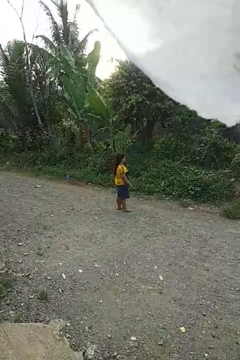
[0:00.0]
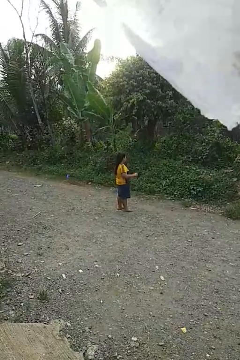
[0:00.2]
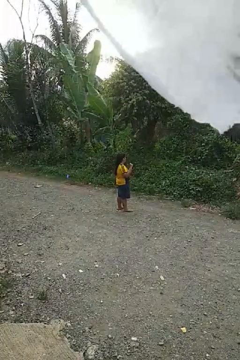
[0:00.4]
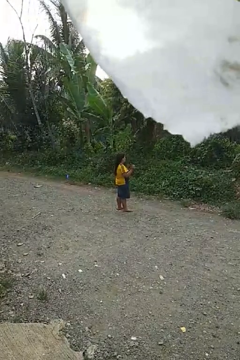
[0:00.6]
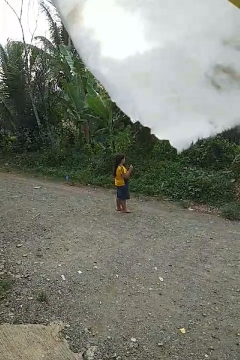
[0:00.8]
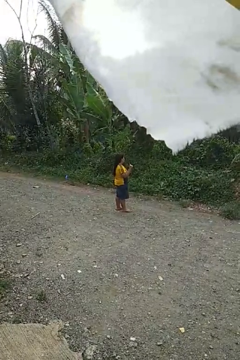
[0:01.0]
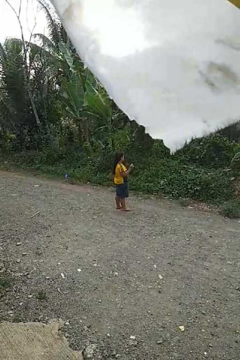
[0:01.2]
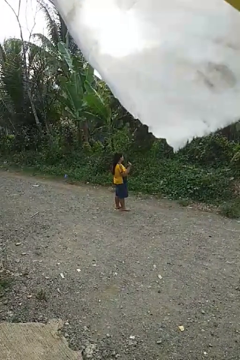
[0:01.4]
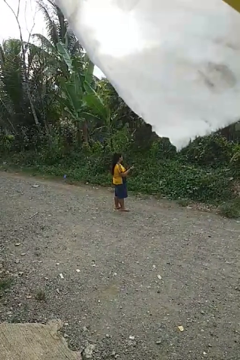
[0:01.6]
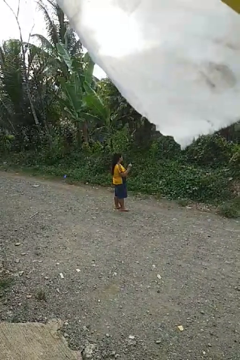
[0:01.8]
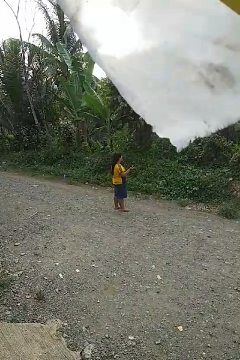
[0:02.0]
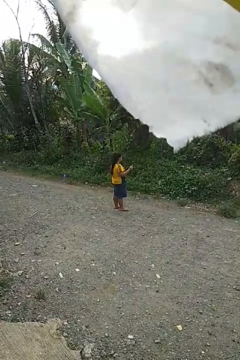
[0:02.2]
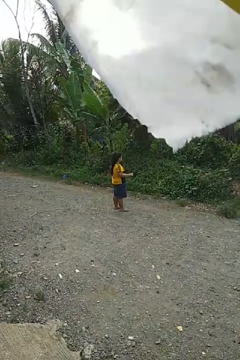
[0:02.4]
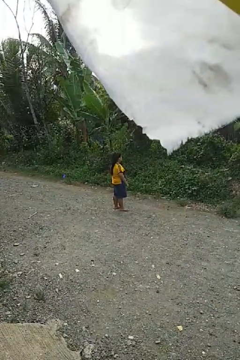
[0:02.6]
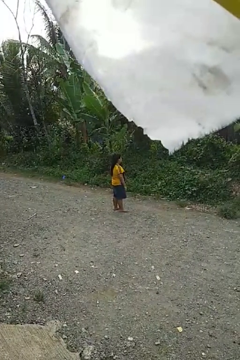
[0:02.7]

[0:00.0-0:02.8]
person snaps fingers

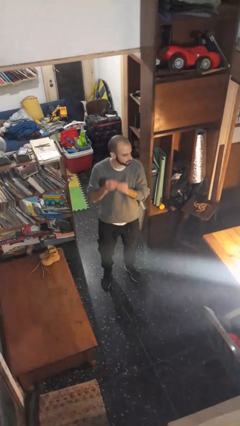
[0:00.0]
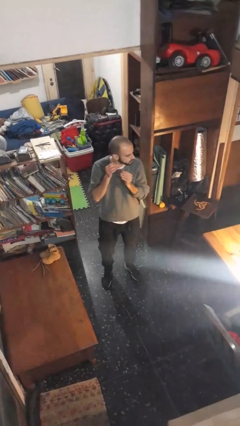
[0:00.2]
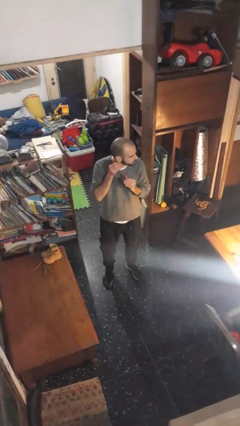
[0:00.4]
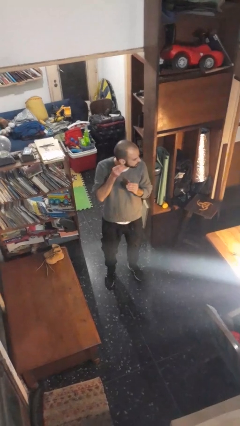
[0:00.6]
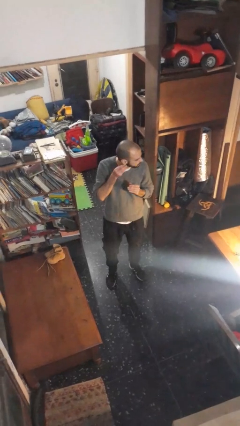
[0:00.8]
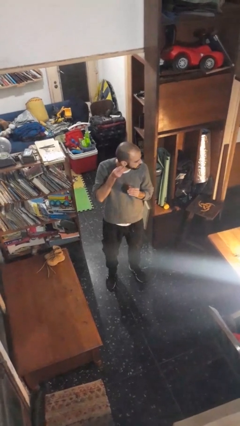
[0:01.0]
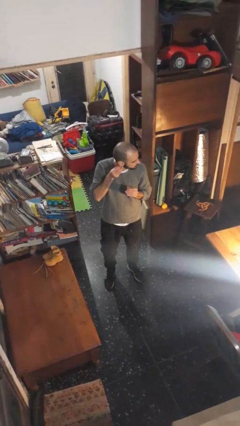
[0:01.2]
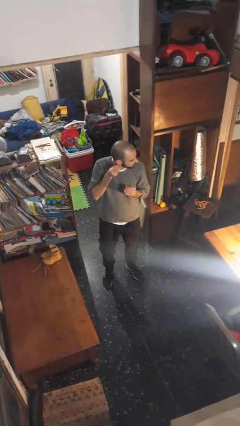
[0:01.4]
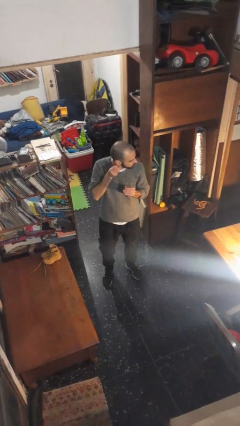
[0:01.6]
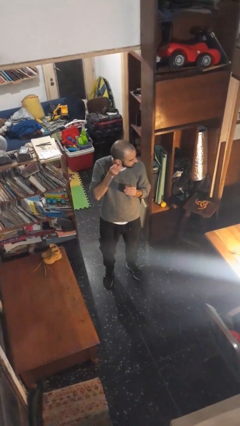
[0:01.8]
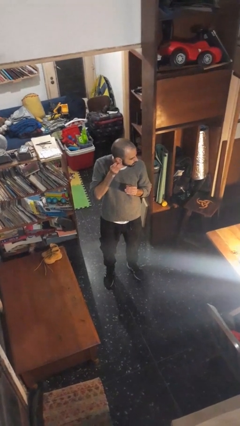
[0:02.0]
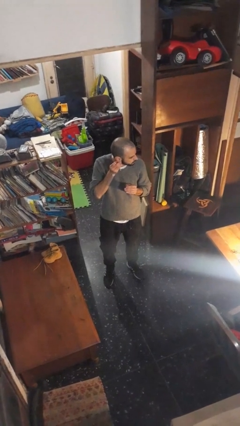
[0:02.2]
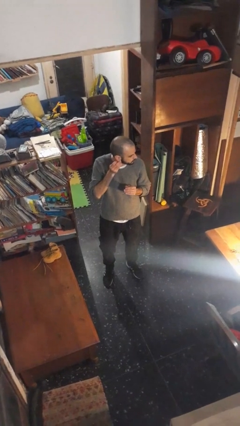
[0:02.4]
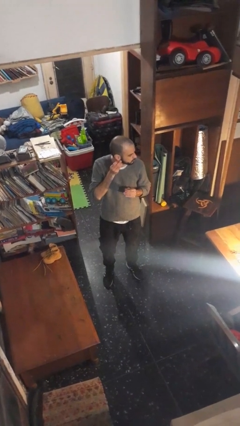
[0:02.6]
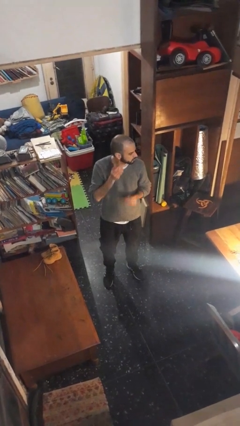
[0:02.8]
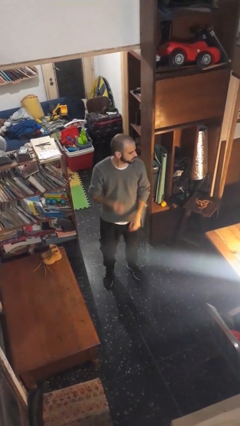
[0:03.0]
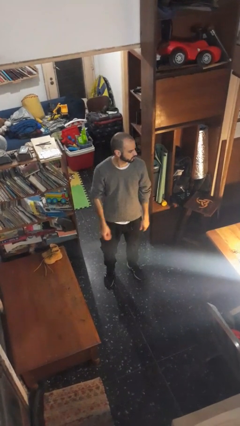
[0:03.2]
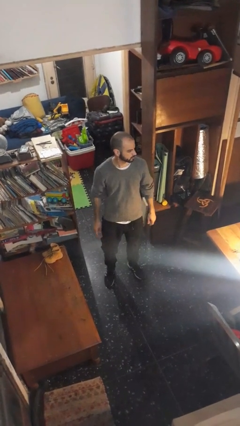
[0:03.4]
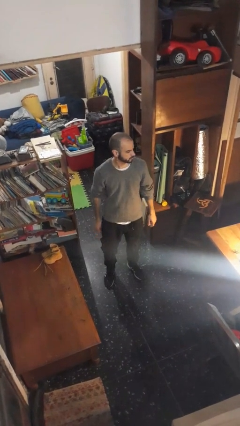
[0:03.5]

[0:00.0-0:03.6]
person puts on earrings

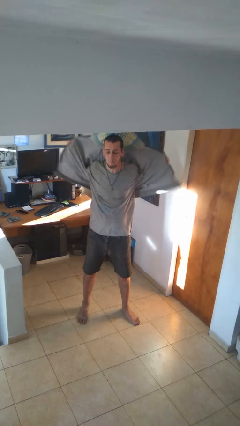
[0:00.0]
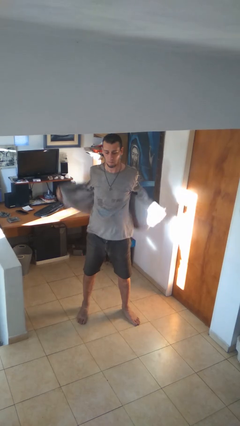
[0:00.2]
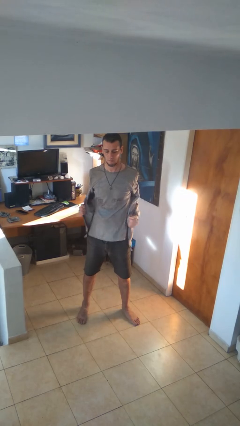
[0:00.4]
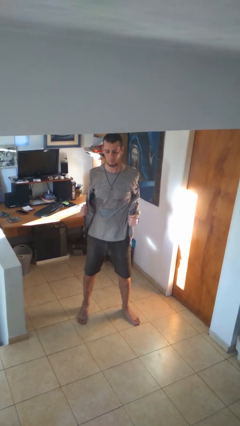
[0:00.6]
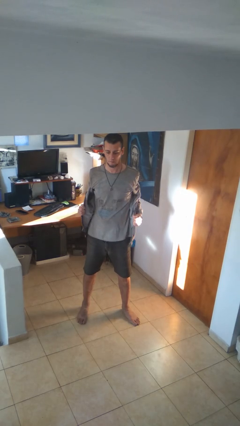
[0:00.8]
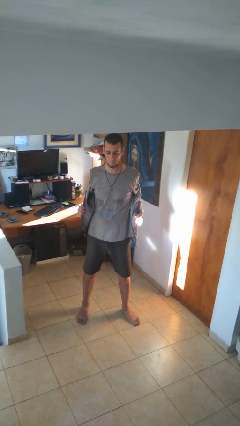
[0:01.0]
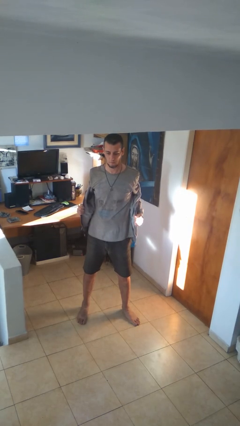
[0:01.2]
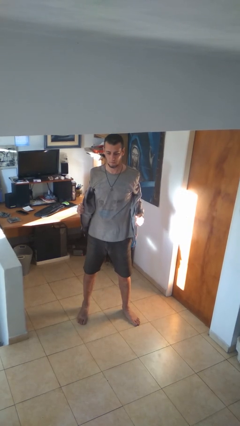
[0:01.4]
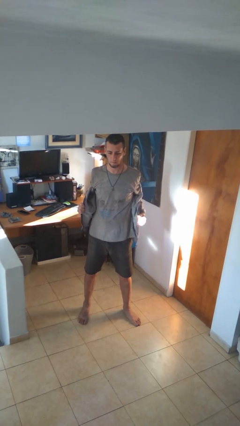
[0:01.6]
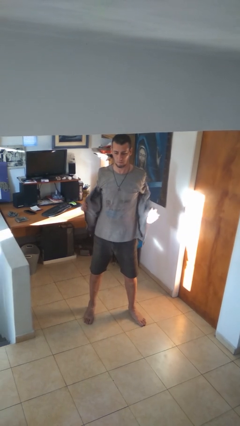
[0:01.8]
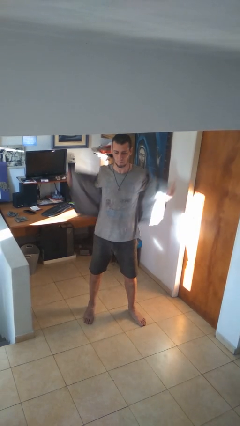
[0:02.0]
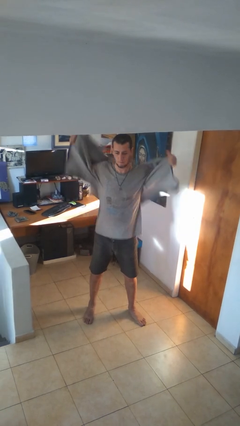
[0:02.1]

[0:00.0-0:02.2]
person takes off hoodie

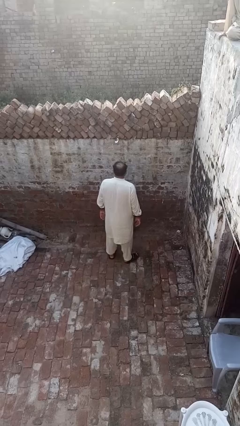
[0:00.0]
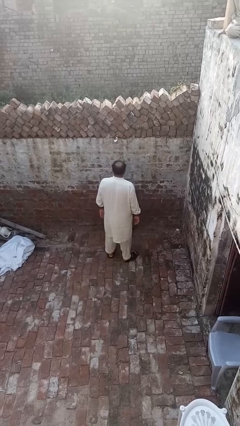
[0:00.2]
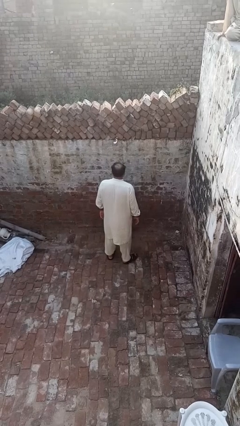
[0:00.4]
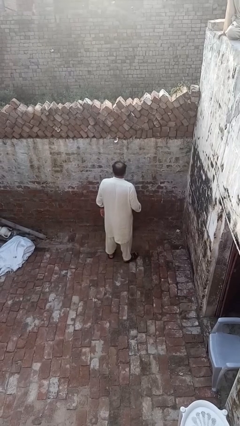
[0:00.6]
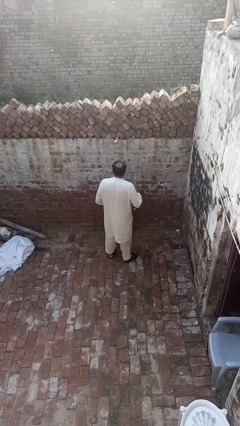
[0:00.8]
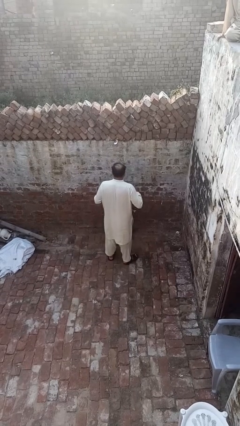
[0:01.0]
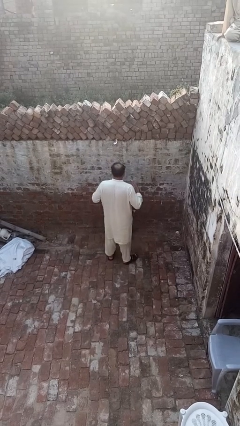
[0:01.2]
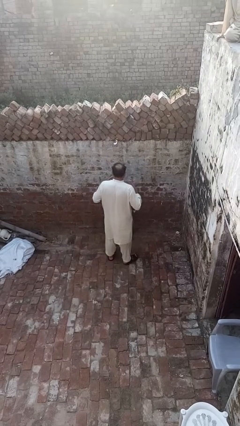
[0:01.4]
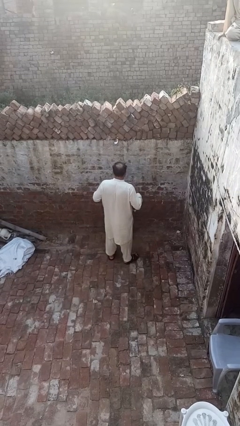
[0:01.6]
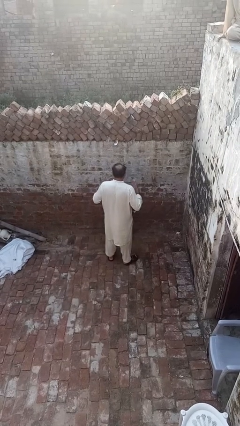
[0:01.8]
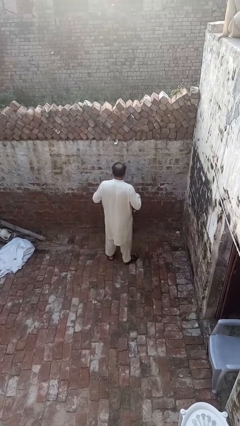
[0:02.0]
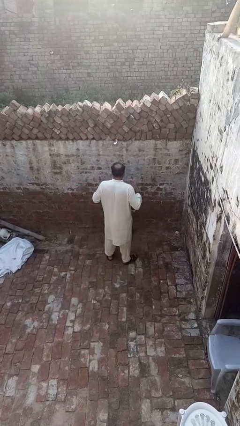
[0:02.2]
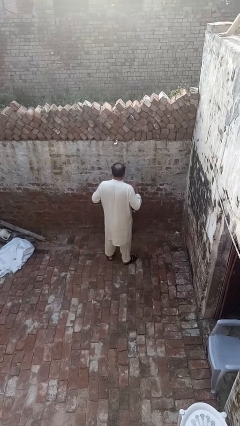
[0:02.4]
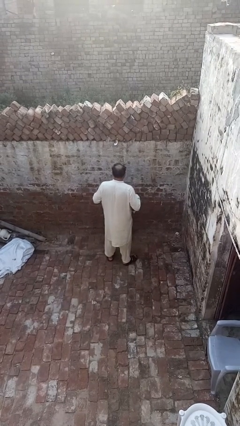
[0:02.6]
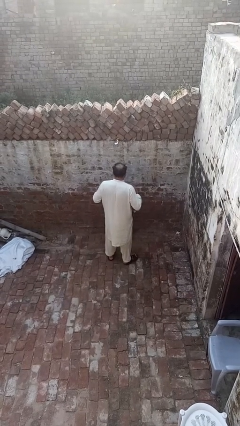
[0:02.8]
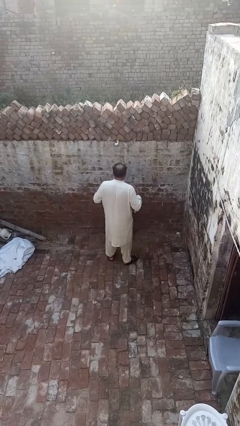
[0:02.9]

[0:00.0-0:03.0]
person drums on chest

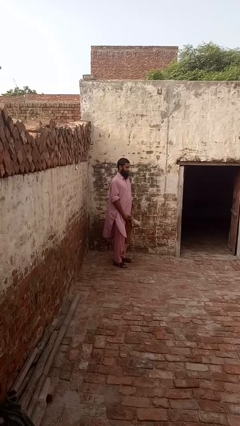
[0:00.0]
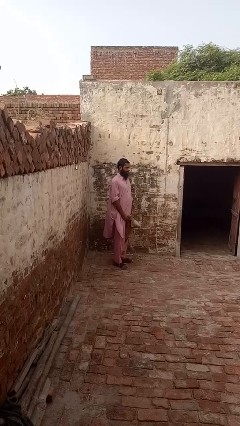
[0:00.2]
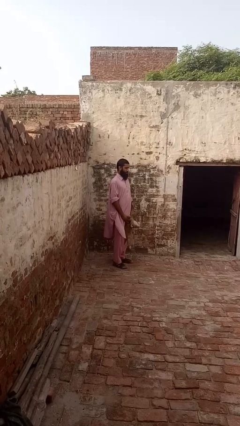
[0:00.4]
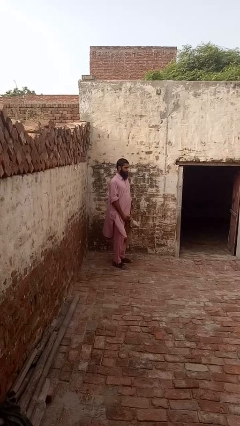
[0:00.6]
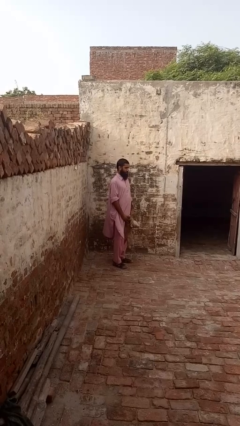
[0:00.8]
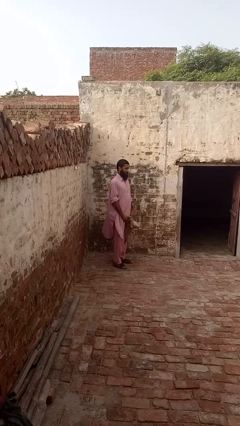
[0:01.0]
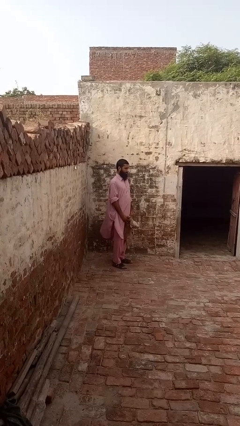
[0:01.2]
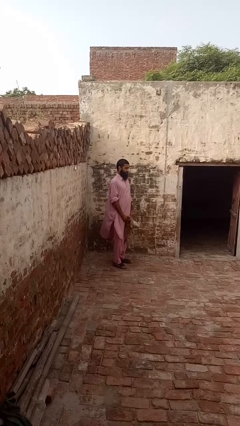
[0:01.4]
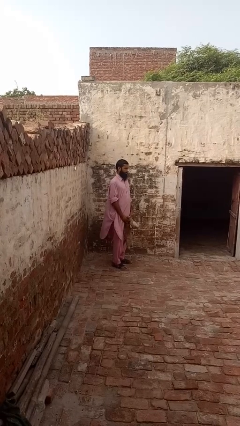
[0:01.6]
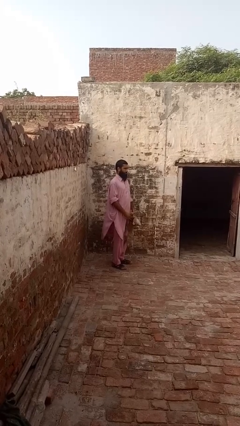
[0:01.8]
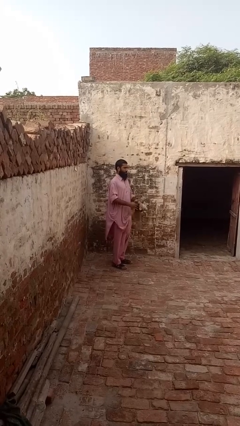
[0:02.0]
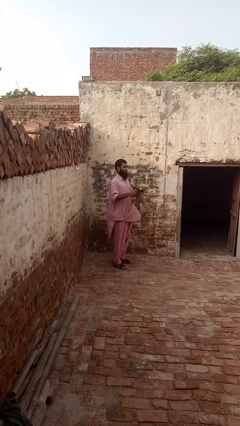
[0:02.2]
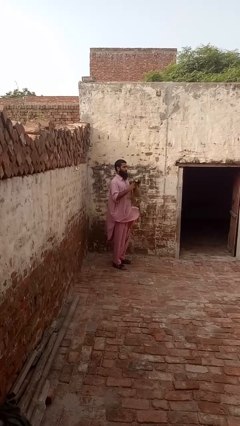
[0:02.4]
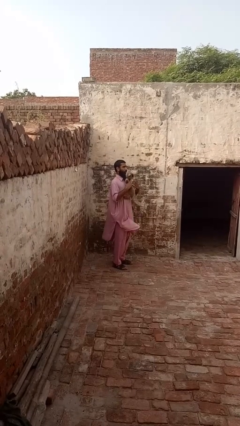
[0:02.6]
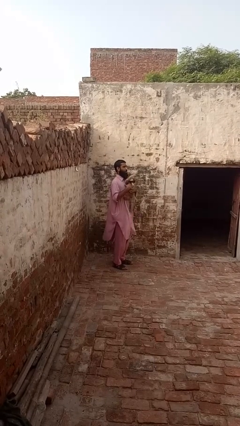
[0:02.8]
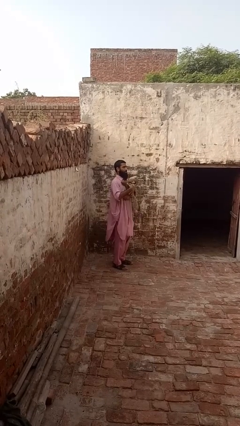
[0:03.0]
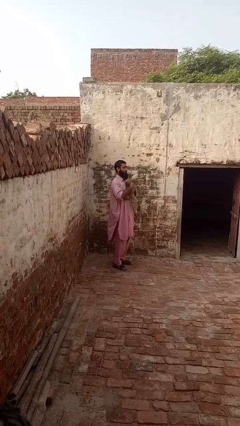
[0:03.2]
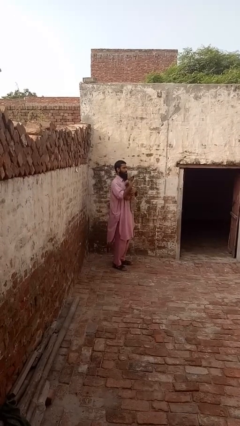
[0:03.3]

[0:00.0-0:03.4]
person hugs stuffed animal

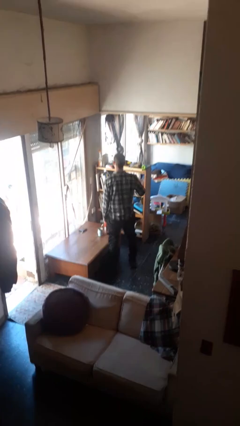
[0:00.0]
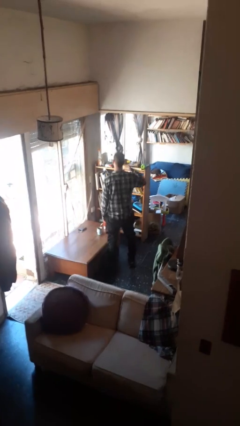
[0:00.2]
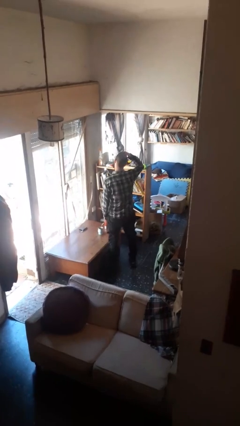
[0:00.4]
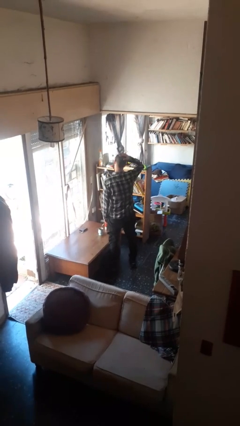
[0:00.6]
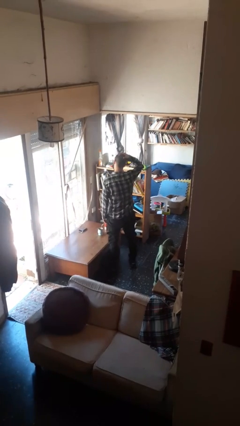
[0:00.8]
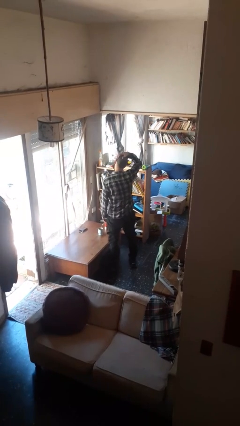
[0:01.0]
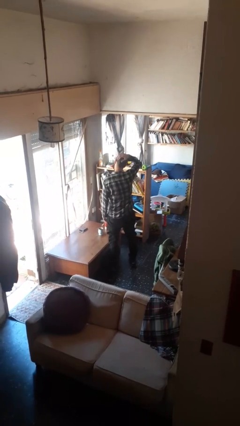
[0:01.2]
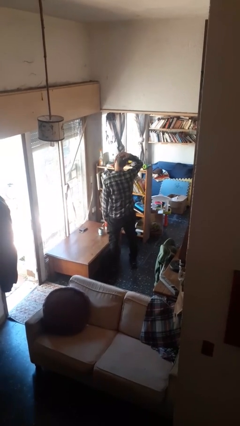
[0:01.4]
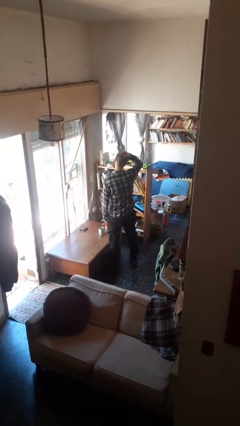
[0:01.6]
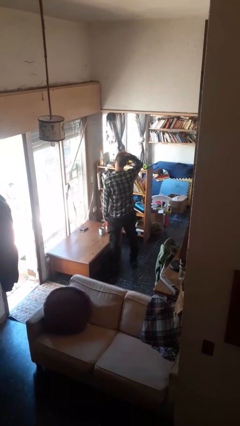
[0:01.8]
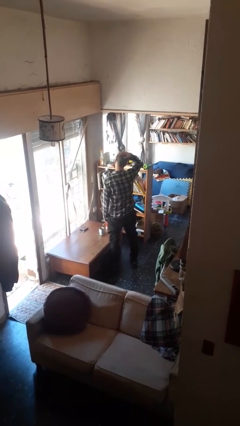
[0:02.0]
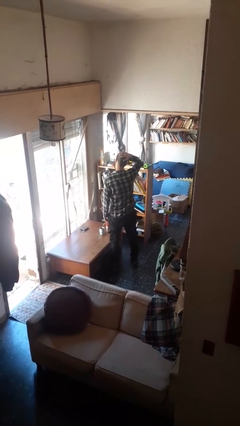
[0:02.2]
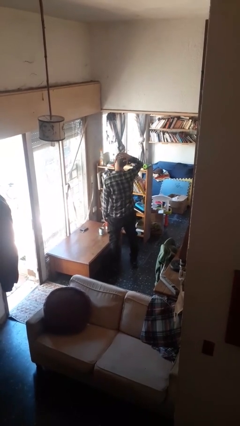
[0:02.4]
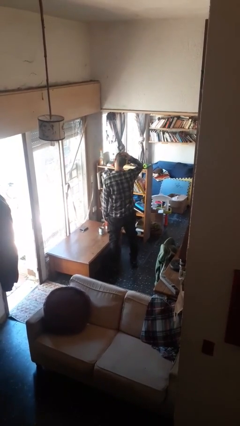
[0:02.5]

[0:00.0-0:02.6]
person pats head

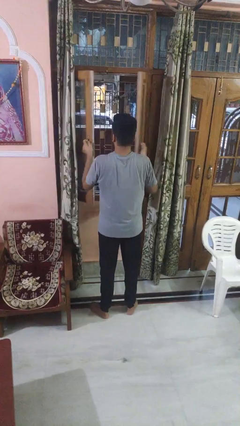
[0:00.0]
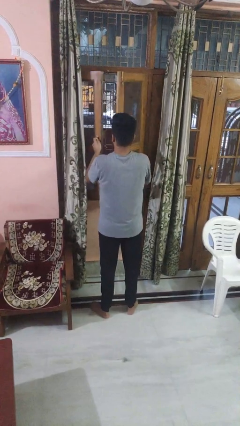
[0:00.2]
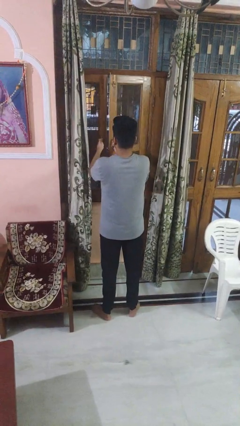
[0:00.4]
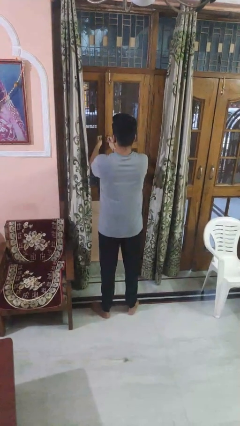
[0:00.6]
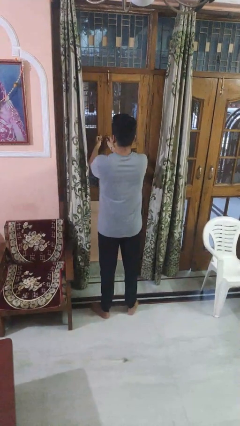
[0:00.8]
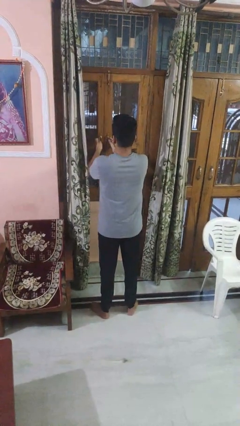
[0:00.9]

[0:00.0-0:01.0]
person closes home window
